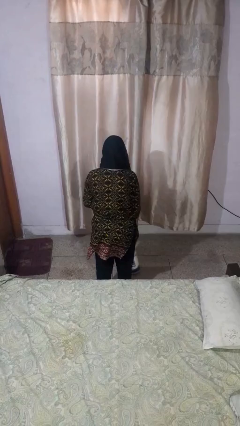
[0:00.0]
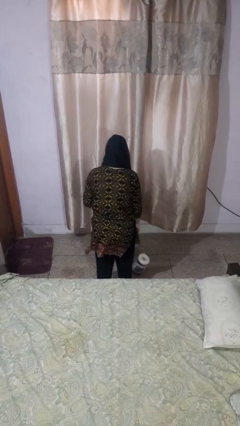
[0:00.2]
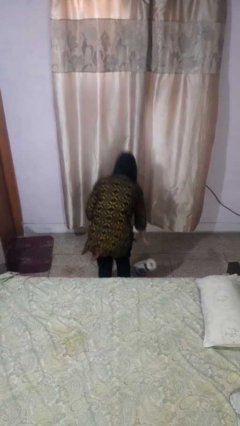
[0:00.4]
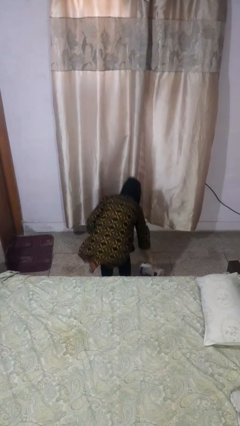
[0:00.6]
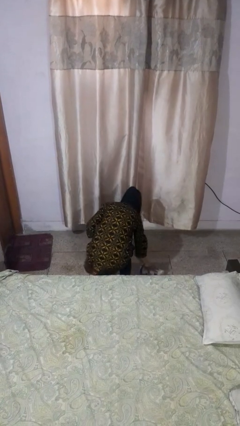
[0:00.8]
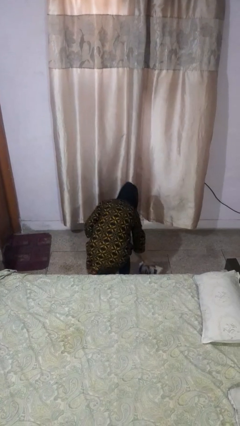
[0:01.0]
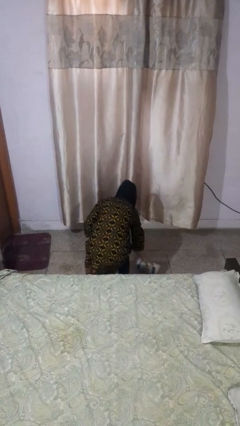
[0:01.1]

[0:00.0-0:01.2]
person picks up object from floor

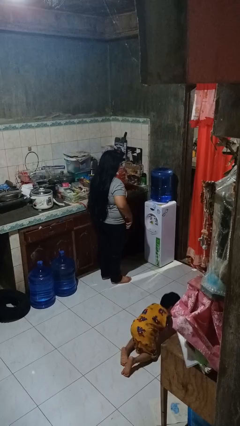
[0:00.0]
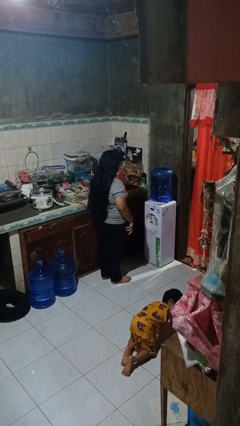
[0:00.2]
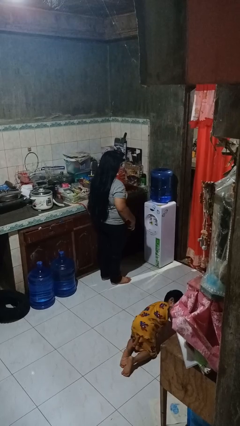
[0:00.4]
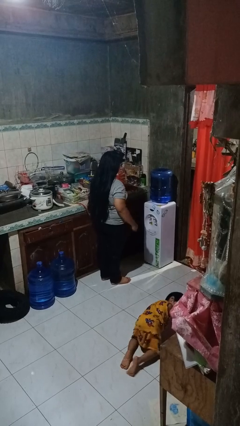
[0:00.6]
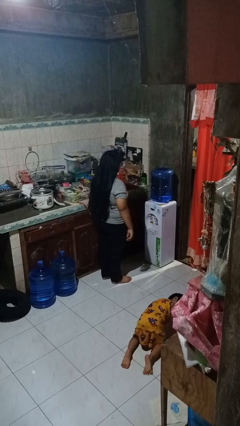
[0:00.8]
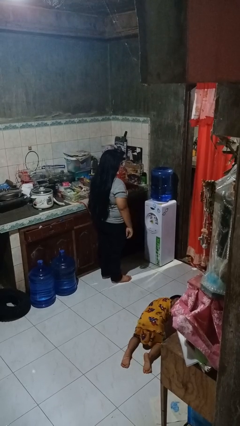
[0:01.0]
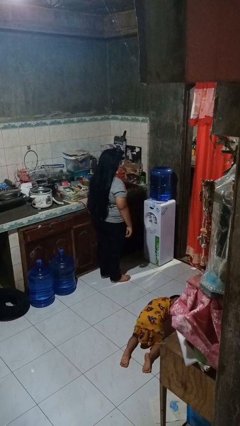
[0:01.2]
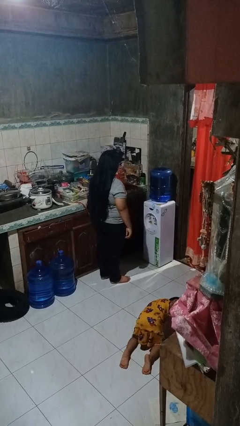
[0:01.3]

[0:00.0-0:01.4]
person puts phone into pocket

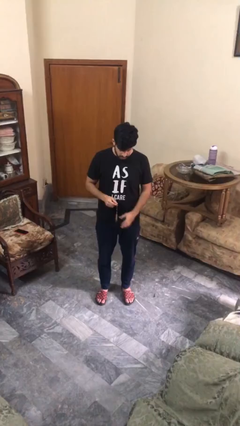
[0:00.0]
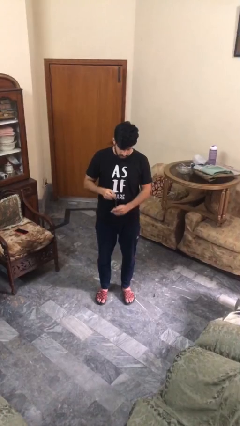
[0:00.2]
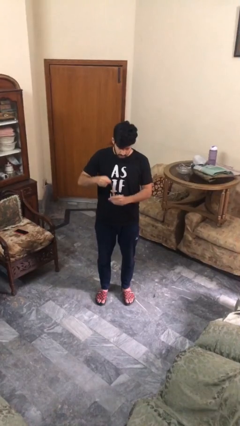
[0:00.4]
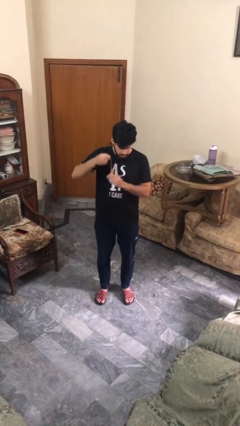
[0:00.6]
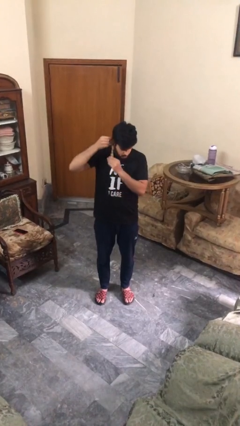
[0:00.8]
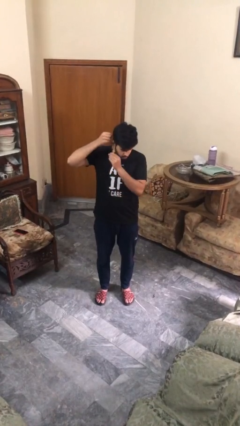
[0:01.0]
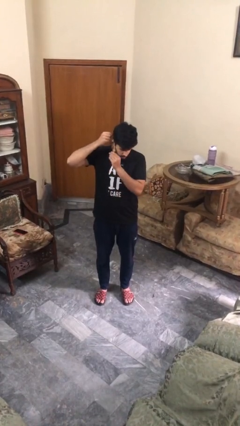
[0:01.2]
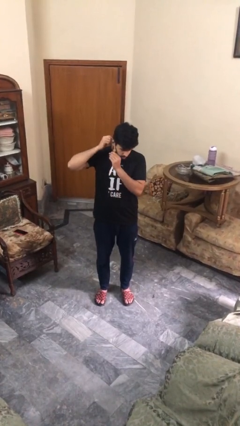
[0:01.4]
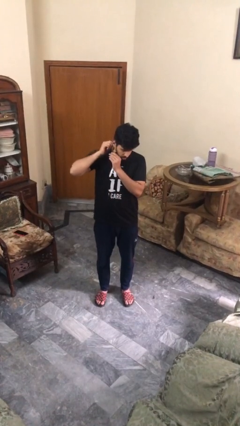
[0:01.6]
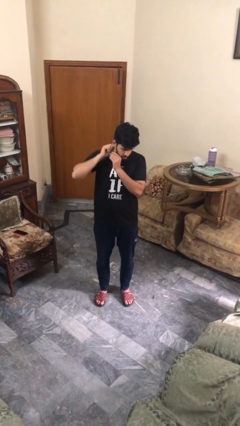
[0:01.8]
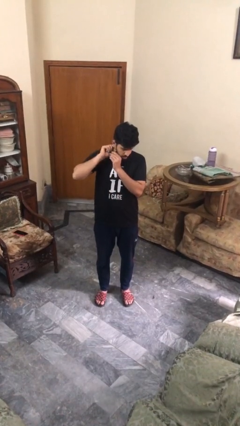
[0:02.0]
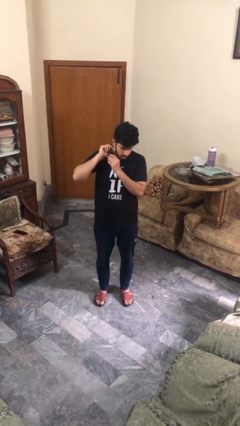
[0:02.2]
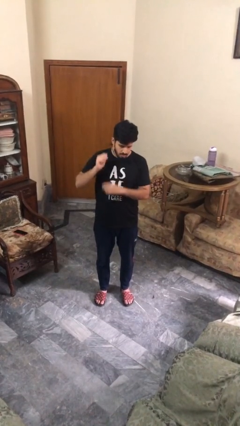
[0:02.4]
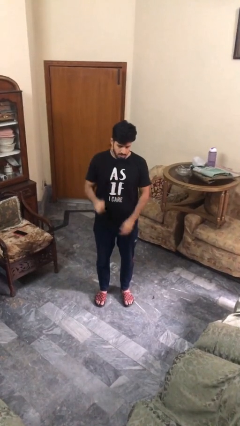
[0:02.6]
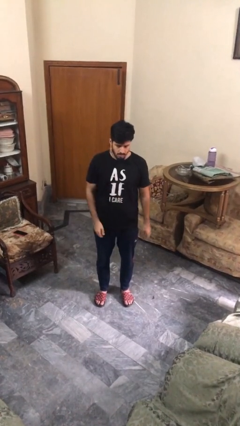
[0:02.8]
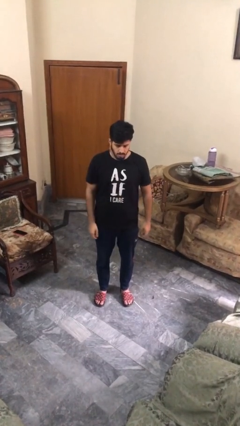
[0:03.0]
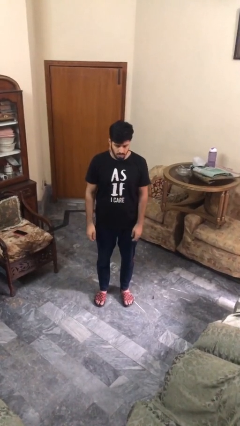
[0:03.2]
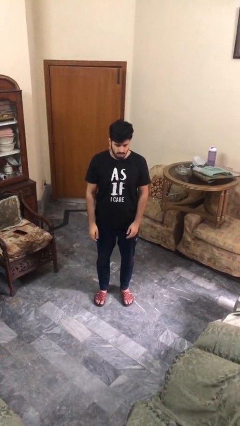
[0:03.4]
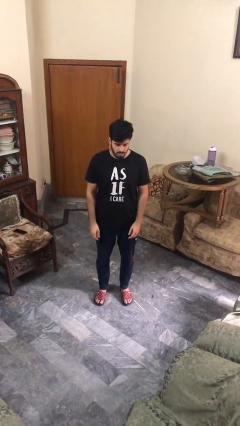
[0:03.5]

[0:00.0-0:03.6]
person puts on earrings

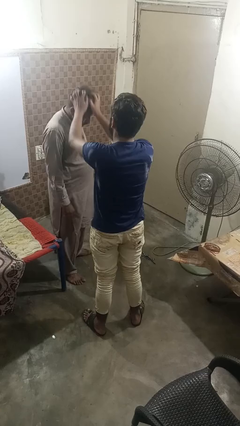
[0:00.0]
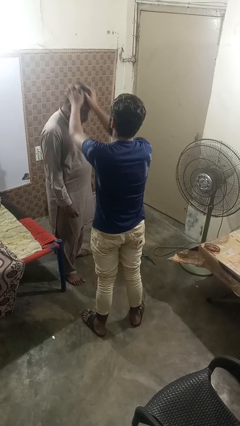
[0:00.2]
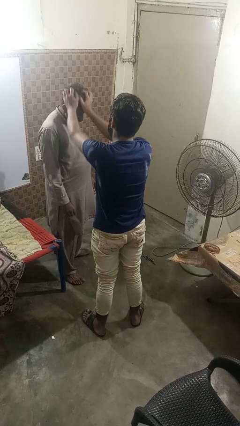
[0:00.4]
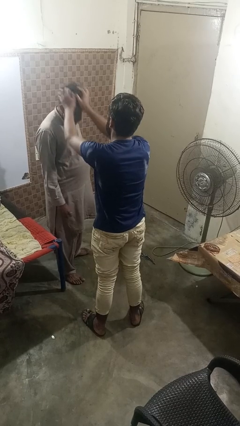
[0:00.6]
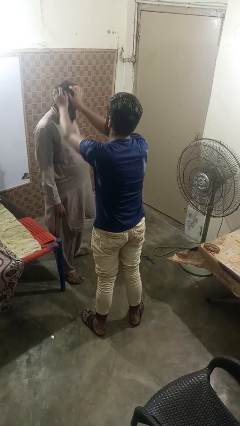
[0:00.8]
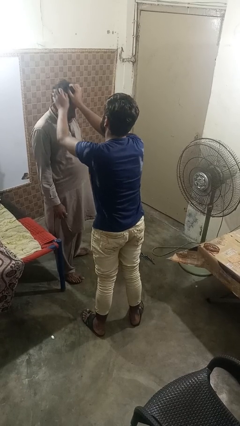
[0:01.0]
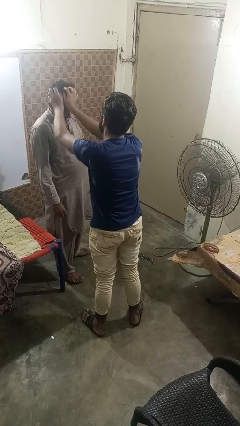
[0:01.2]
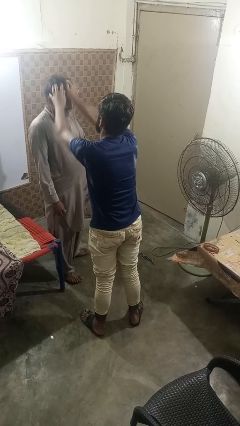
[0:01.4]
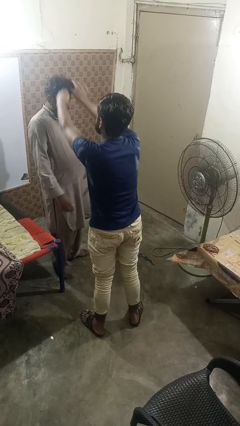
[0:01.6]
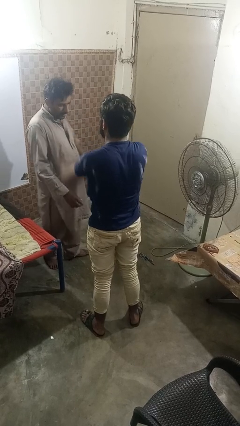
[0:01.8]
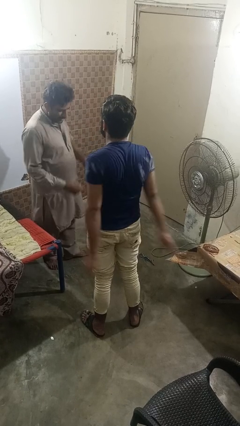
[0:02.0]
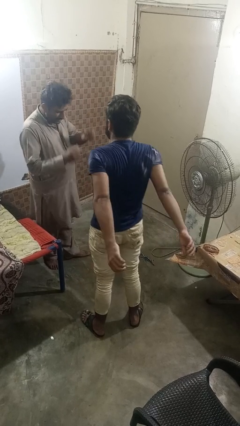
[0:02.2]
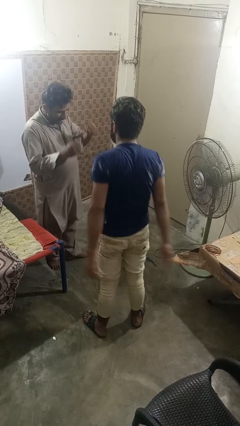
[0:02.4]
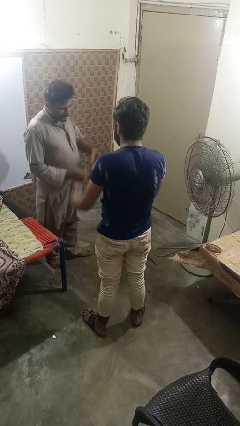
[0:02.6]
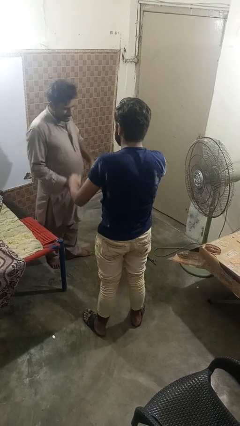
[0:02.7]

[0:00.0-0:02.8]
person grabs person by hair

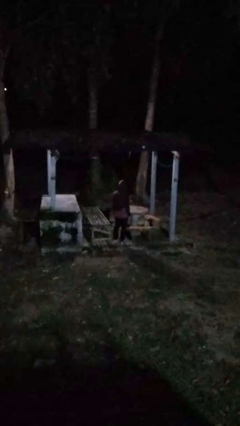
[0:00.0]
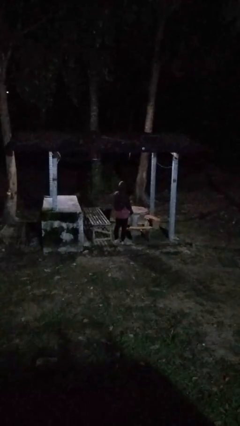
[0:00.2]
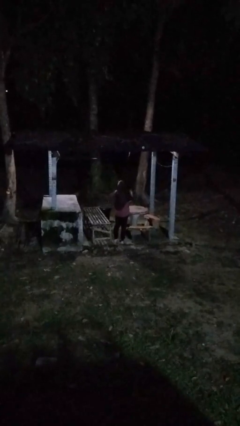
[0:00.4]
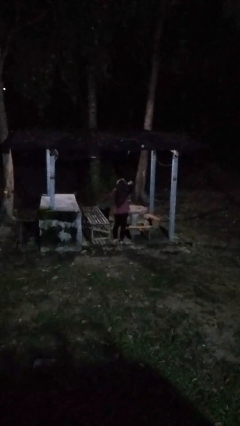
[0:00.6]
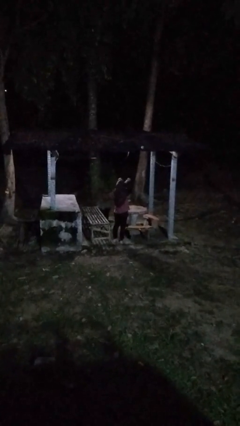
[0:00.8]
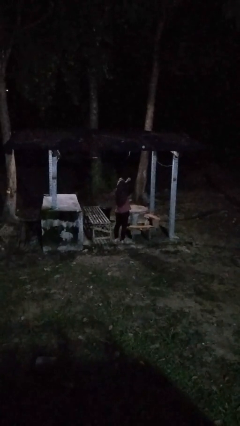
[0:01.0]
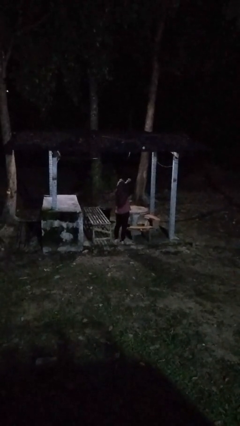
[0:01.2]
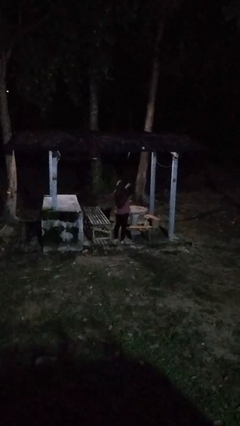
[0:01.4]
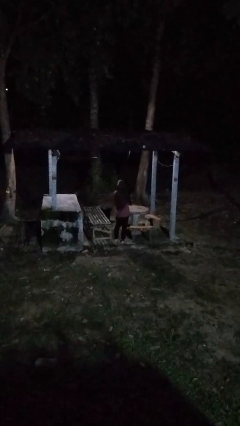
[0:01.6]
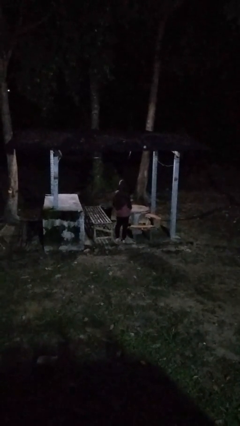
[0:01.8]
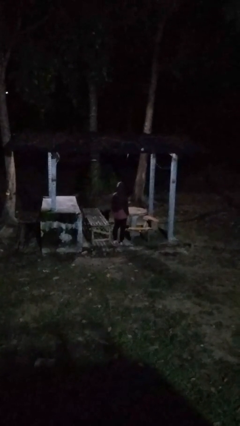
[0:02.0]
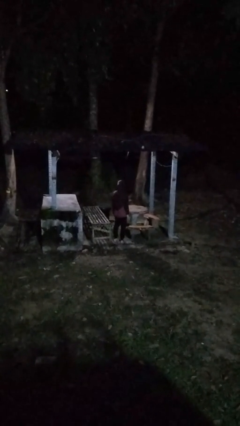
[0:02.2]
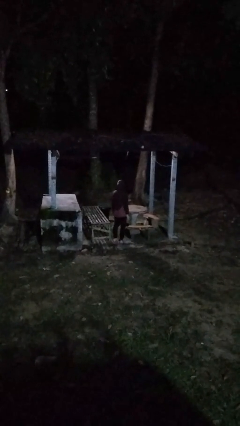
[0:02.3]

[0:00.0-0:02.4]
person gestures arms x

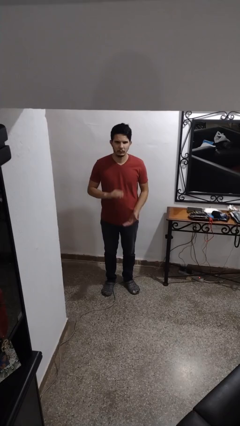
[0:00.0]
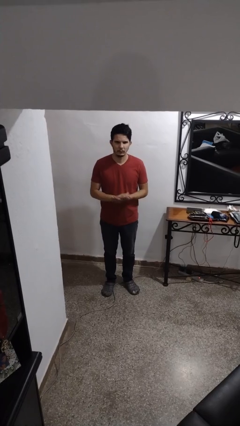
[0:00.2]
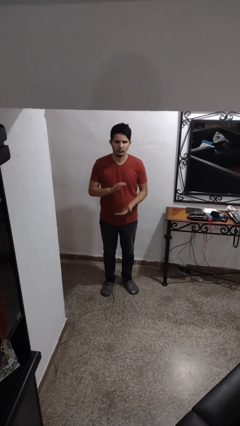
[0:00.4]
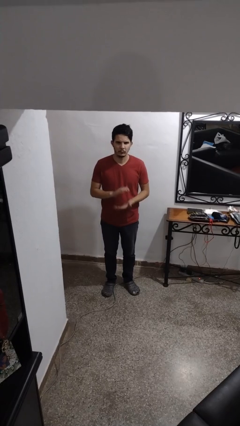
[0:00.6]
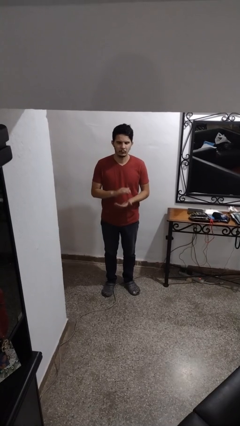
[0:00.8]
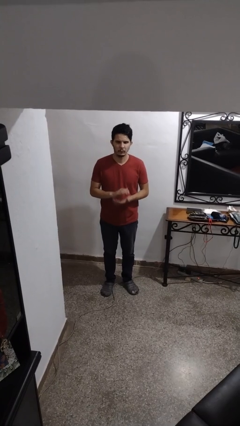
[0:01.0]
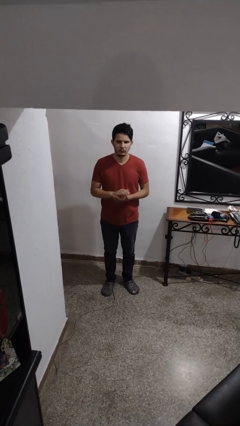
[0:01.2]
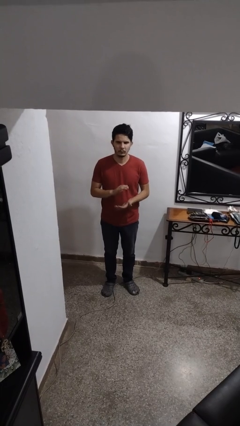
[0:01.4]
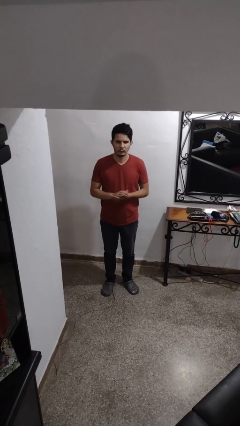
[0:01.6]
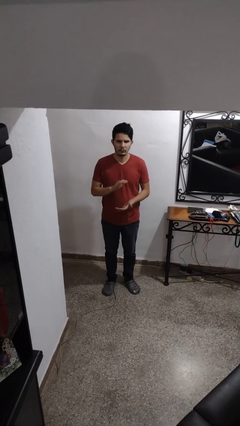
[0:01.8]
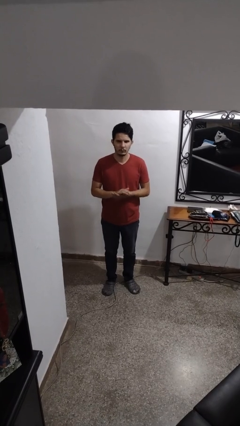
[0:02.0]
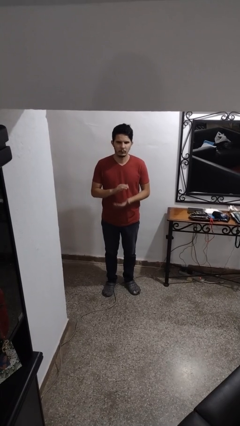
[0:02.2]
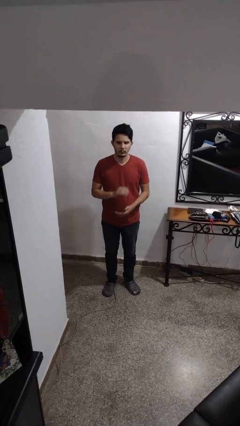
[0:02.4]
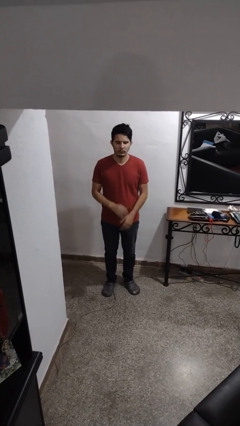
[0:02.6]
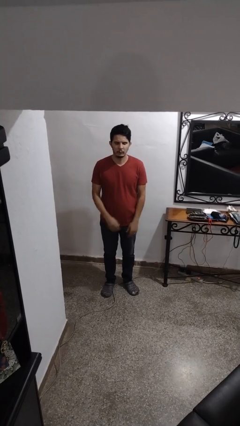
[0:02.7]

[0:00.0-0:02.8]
person claps hands

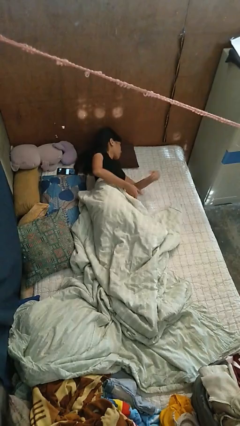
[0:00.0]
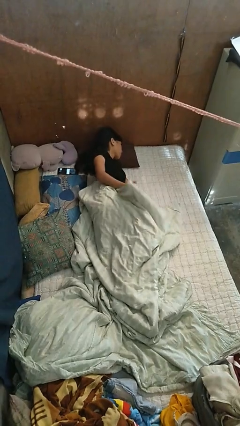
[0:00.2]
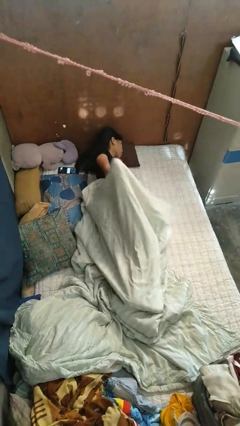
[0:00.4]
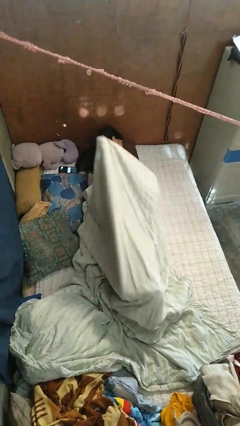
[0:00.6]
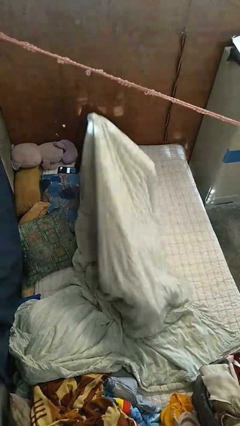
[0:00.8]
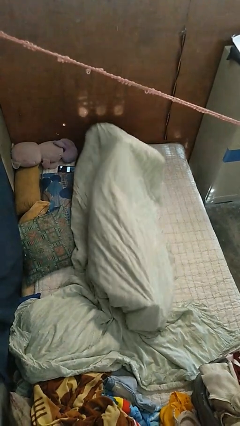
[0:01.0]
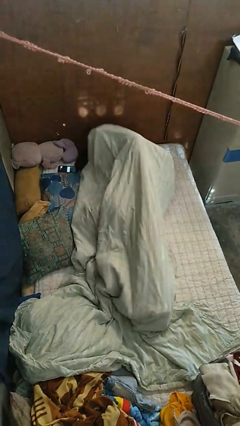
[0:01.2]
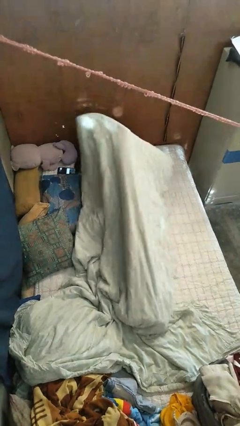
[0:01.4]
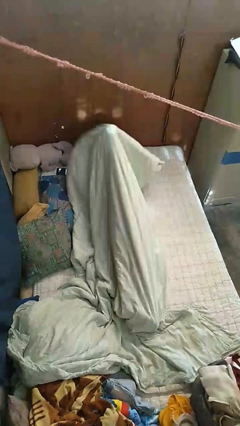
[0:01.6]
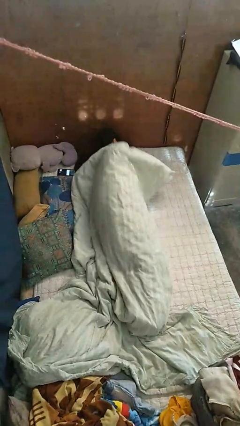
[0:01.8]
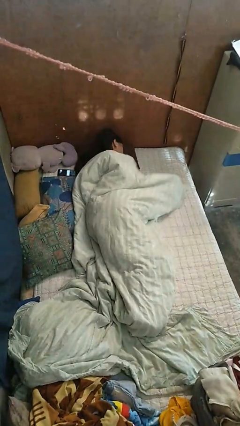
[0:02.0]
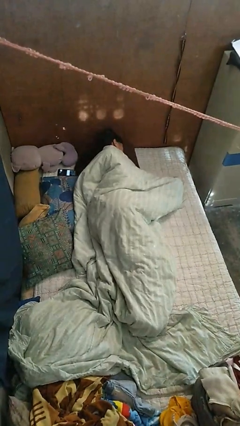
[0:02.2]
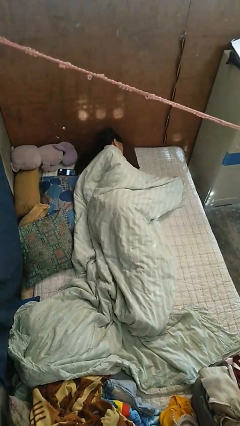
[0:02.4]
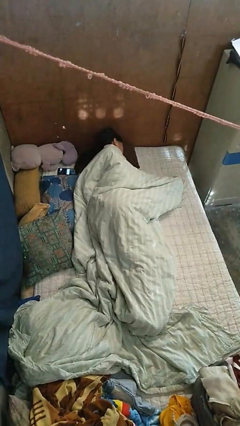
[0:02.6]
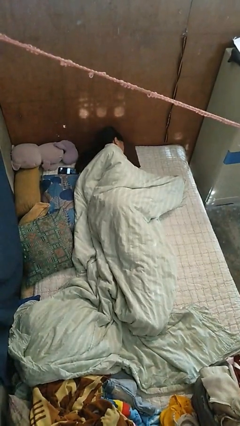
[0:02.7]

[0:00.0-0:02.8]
person covers with bedsheets
